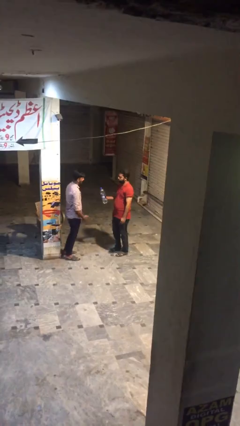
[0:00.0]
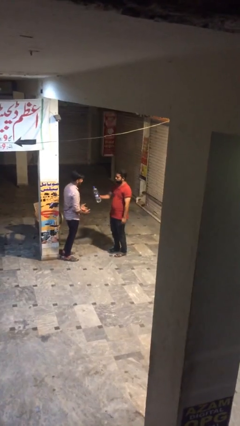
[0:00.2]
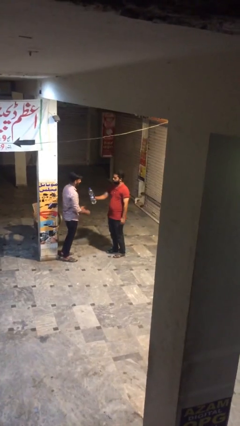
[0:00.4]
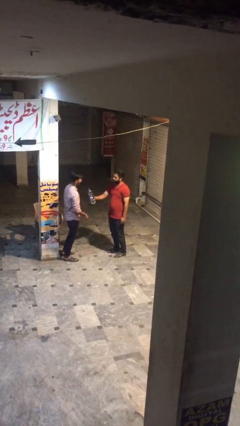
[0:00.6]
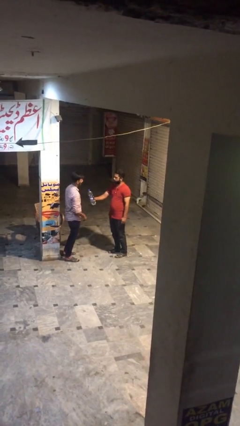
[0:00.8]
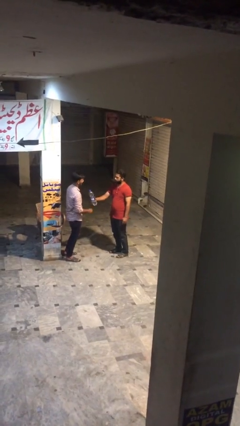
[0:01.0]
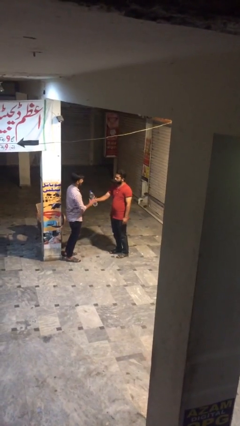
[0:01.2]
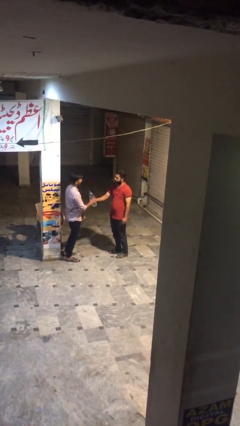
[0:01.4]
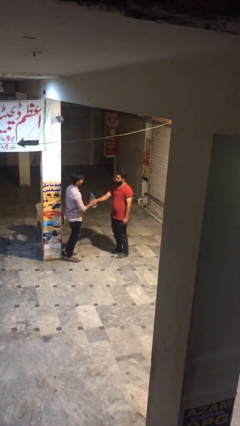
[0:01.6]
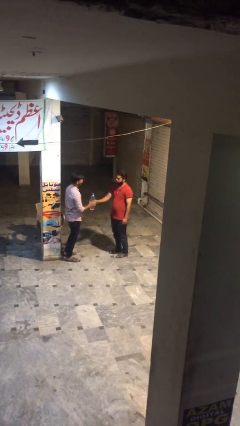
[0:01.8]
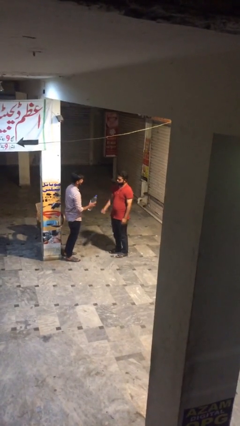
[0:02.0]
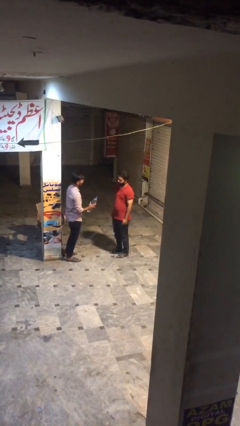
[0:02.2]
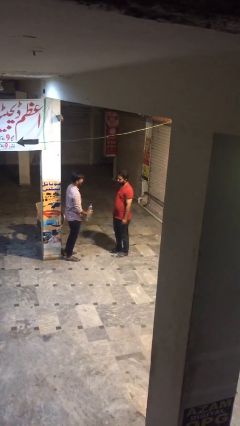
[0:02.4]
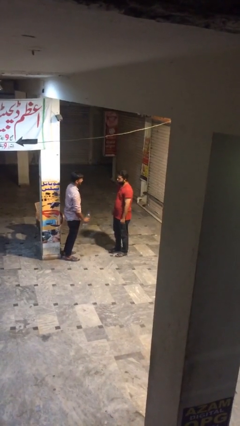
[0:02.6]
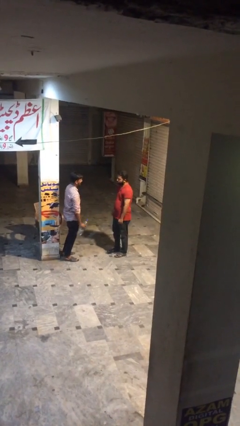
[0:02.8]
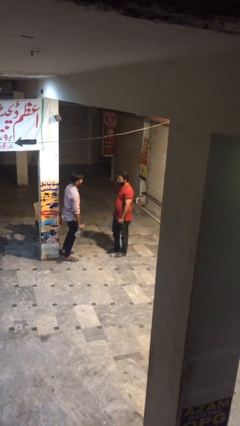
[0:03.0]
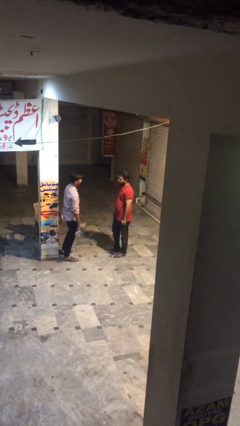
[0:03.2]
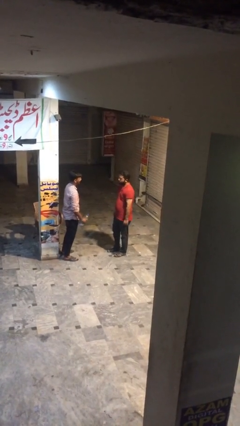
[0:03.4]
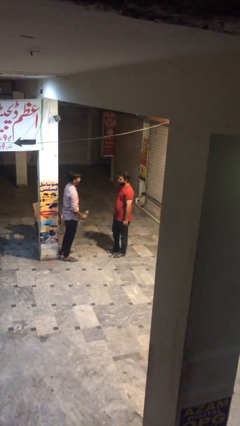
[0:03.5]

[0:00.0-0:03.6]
person transfers object to person

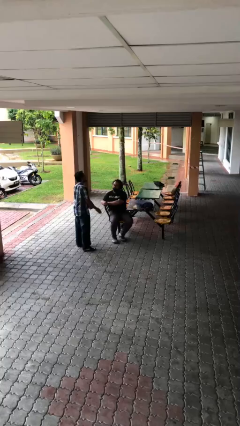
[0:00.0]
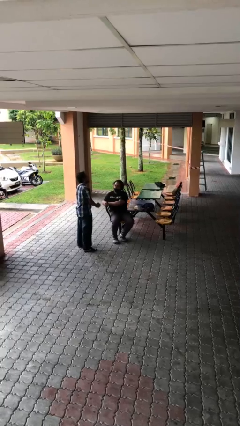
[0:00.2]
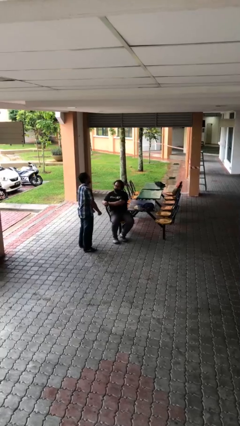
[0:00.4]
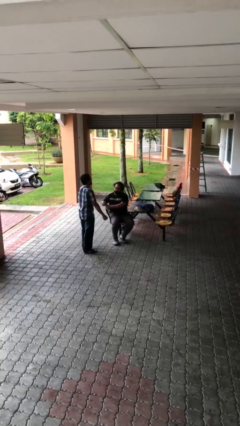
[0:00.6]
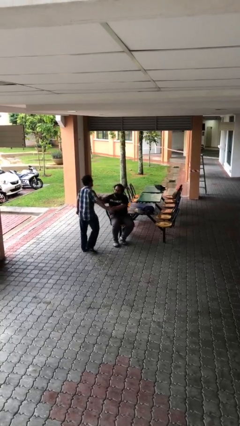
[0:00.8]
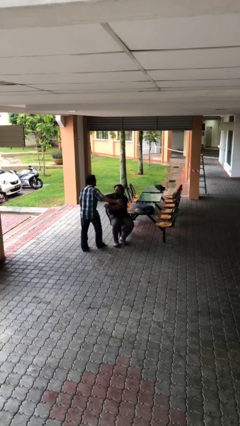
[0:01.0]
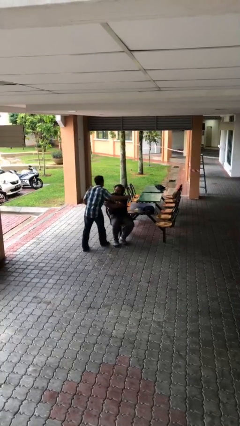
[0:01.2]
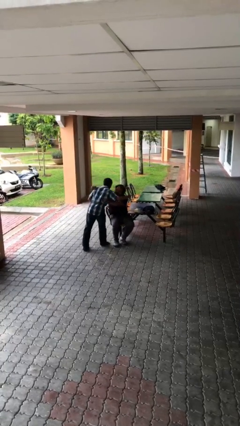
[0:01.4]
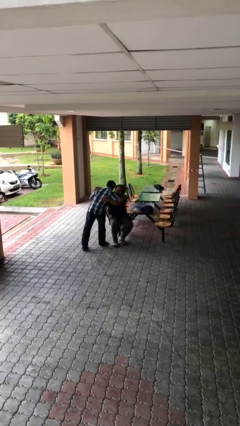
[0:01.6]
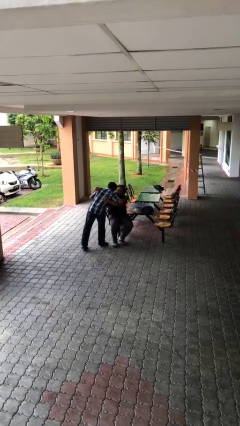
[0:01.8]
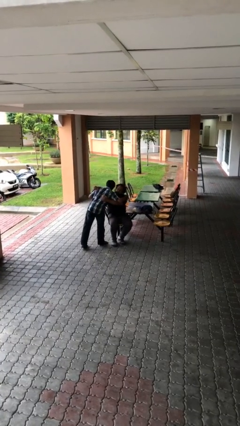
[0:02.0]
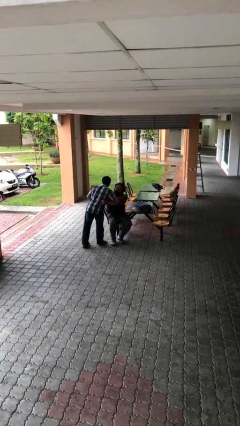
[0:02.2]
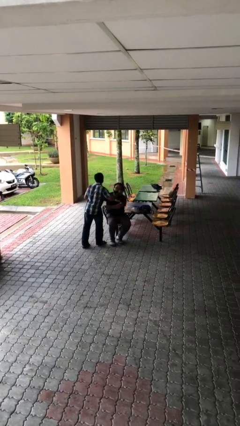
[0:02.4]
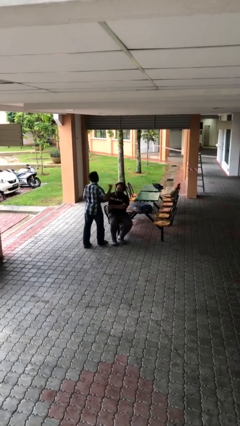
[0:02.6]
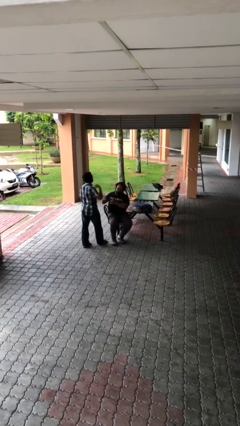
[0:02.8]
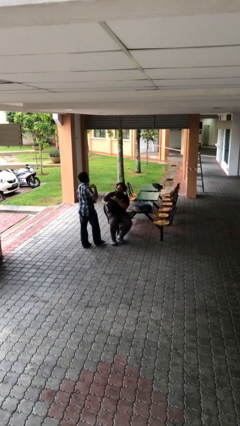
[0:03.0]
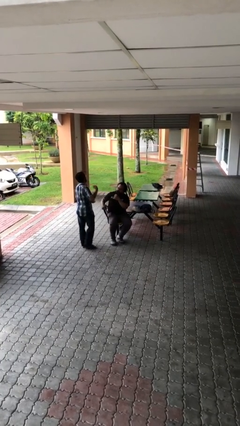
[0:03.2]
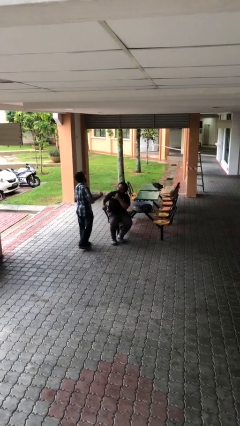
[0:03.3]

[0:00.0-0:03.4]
person embraces person

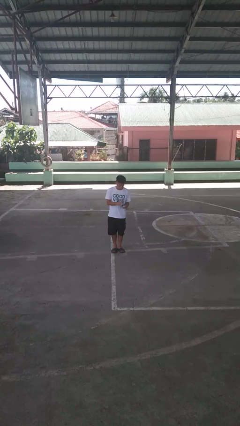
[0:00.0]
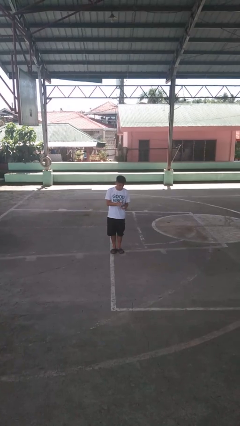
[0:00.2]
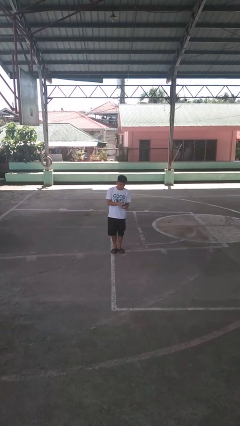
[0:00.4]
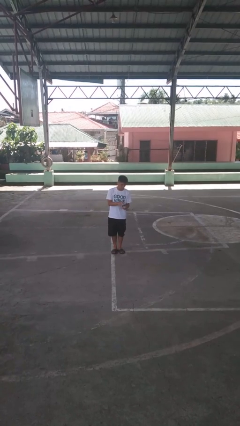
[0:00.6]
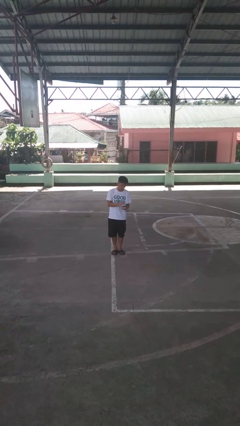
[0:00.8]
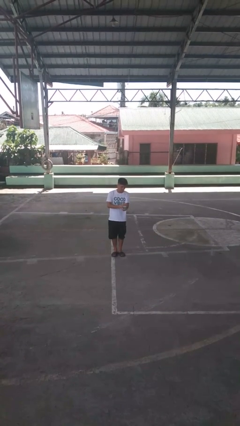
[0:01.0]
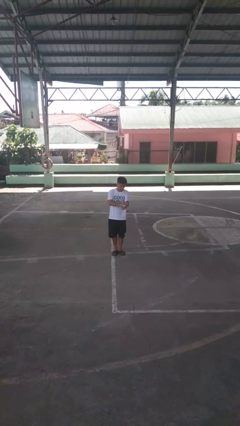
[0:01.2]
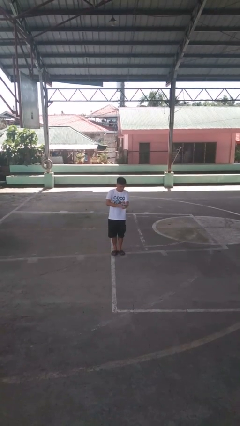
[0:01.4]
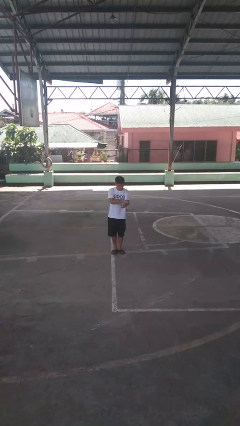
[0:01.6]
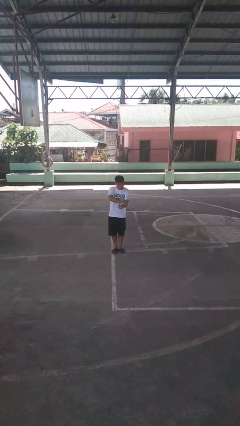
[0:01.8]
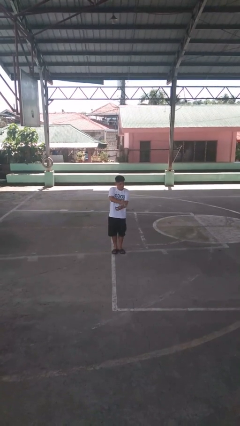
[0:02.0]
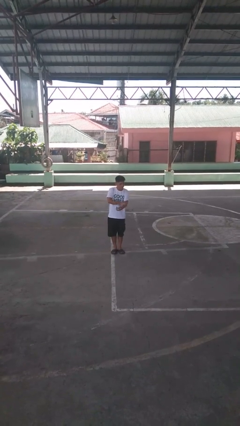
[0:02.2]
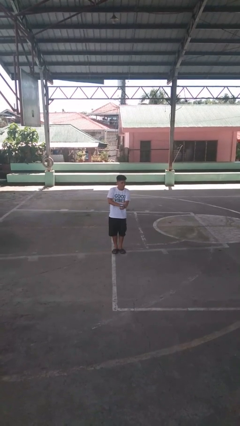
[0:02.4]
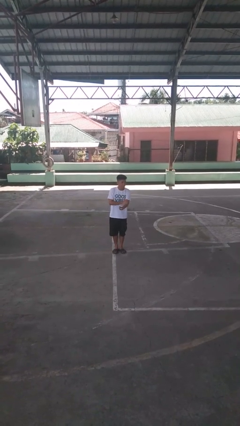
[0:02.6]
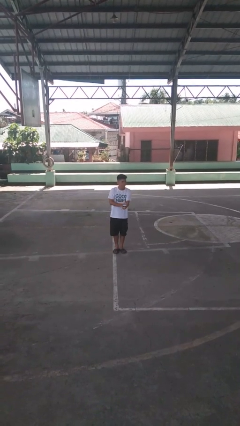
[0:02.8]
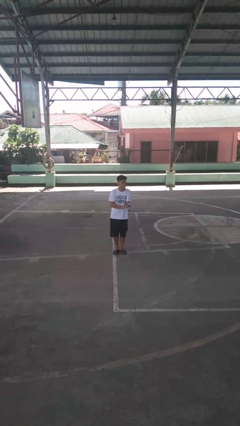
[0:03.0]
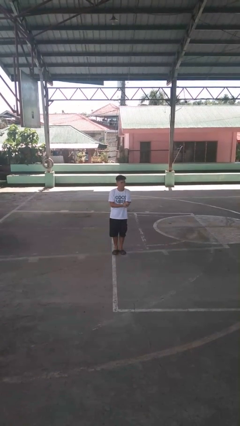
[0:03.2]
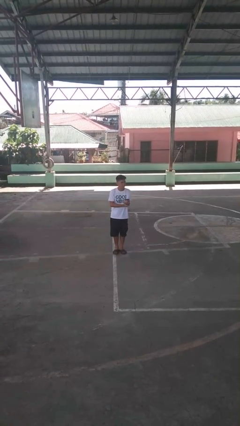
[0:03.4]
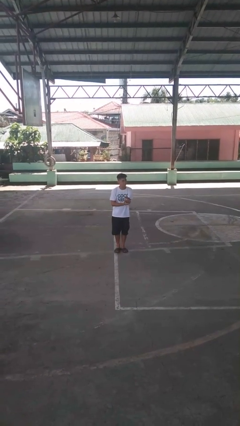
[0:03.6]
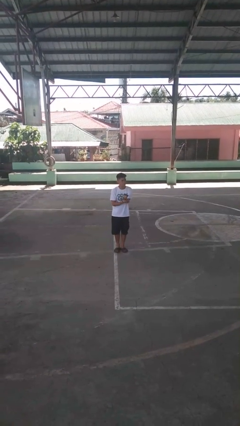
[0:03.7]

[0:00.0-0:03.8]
person applies sunscreen

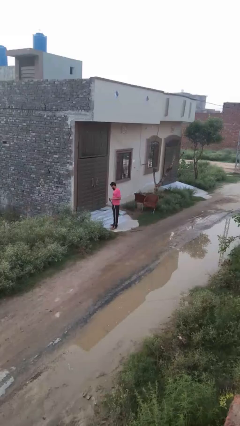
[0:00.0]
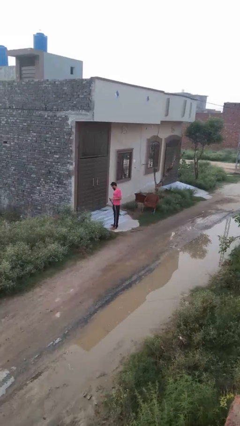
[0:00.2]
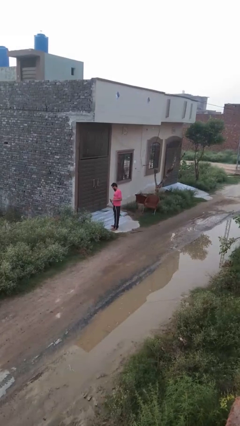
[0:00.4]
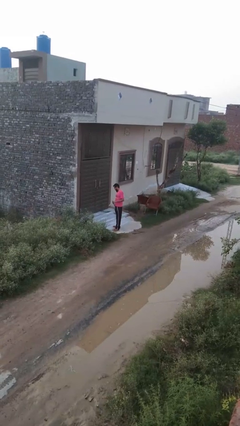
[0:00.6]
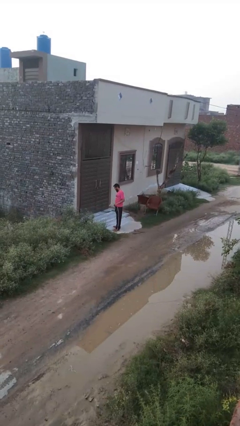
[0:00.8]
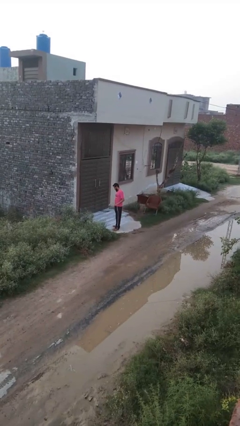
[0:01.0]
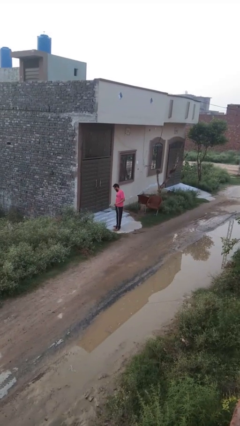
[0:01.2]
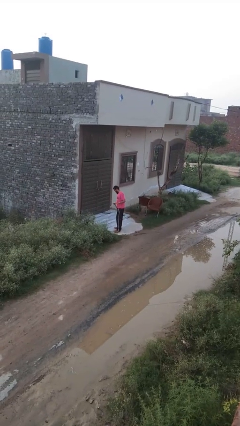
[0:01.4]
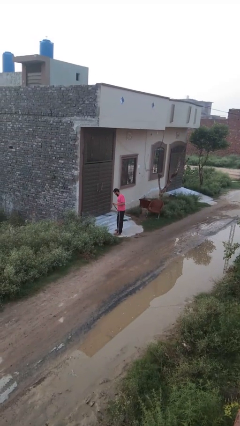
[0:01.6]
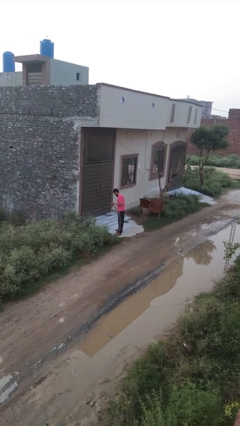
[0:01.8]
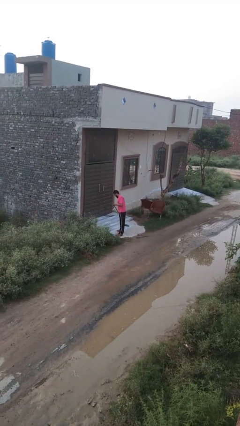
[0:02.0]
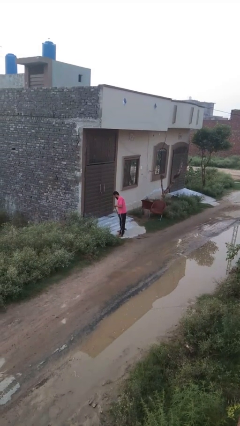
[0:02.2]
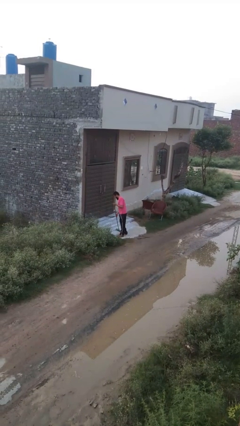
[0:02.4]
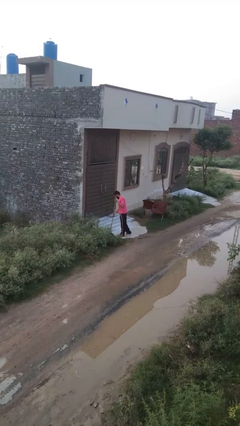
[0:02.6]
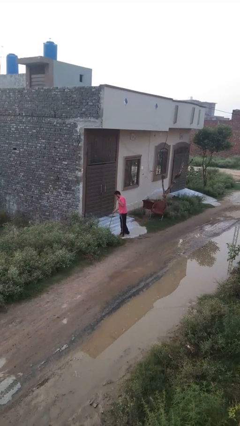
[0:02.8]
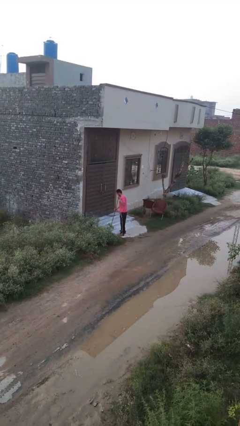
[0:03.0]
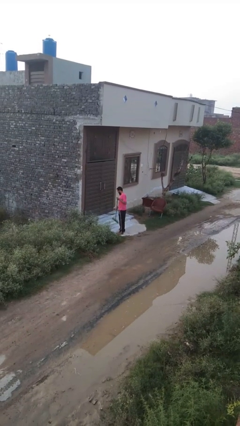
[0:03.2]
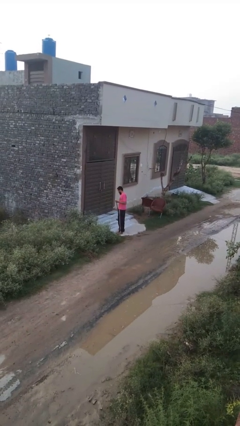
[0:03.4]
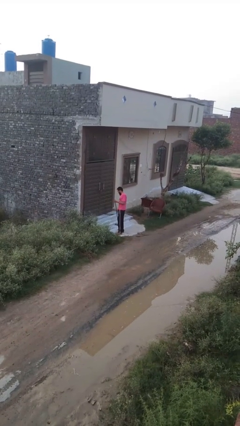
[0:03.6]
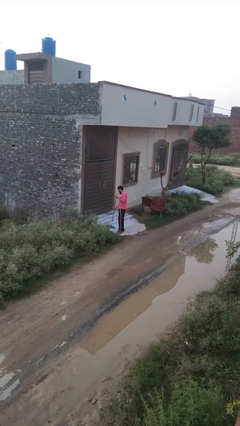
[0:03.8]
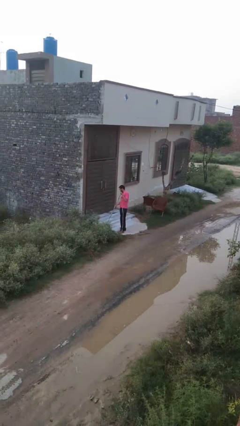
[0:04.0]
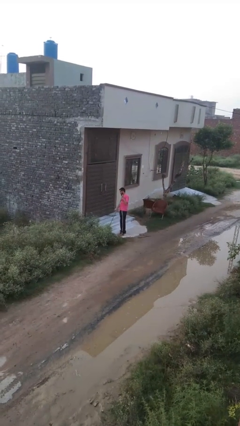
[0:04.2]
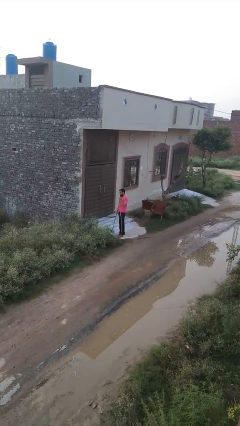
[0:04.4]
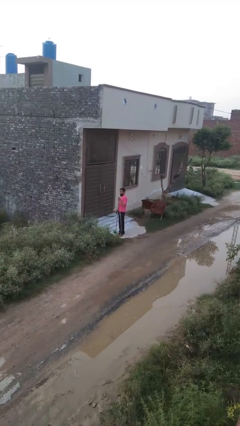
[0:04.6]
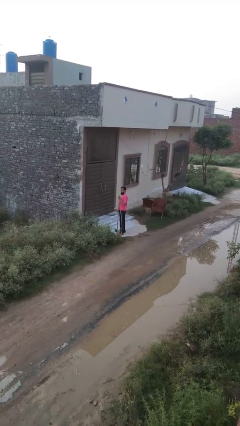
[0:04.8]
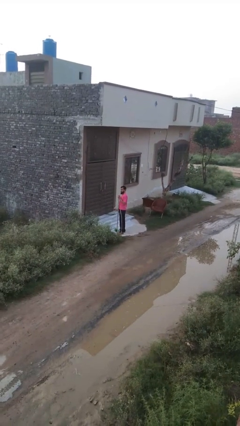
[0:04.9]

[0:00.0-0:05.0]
person sweeps floor

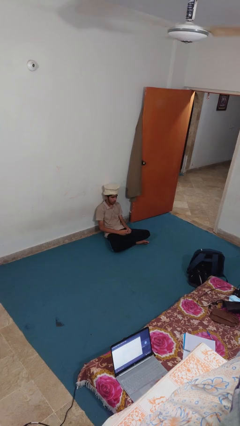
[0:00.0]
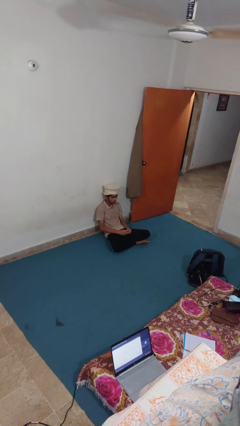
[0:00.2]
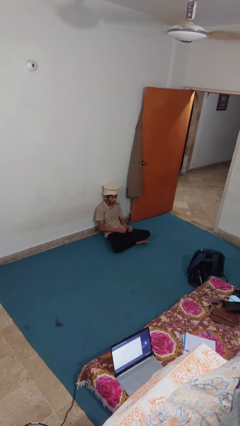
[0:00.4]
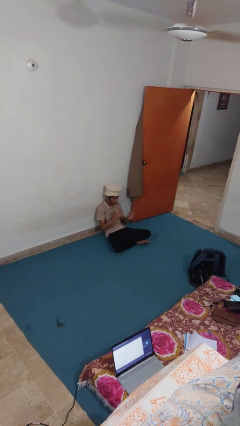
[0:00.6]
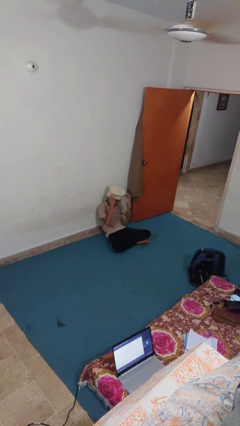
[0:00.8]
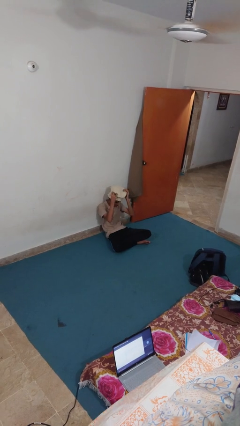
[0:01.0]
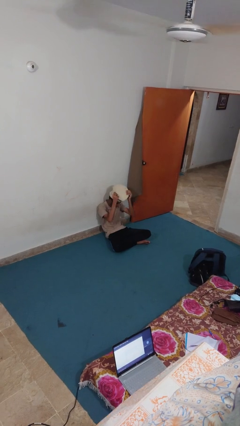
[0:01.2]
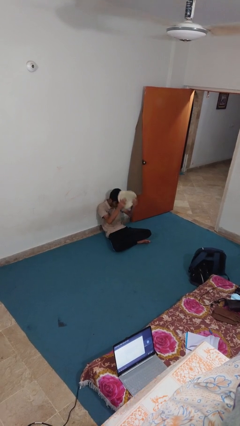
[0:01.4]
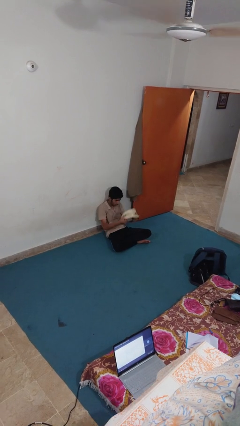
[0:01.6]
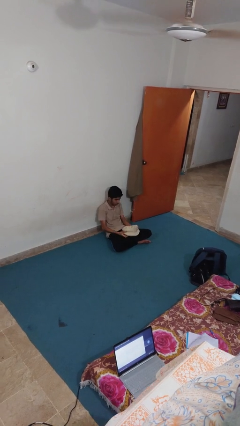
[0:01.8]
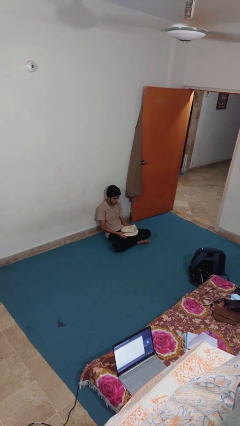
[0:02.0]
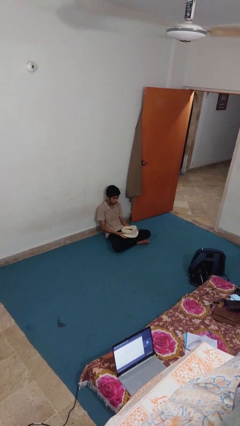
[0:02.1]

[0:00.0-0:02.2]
person takes off hat
